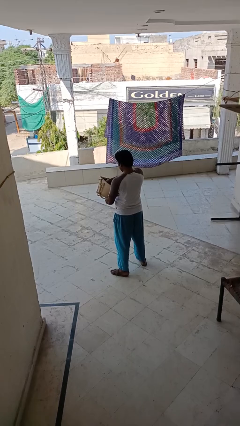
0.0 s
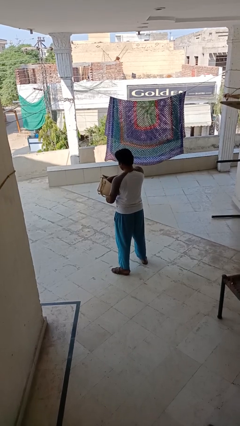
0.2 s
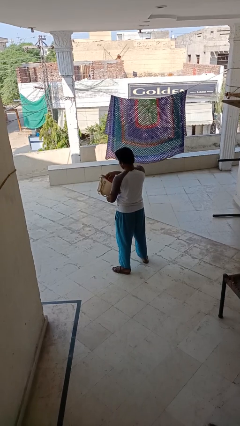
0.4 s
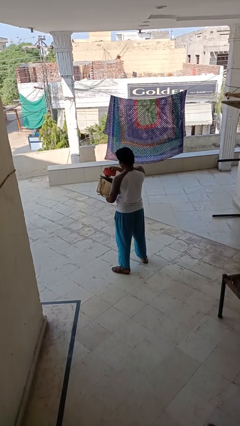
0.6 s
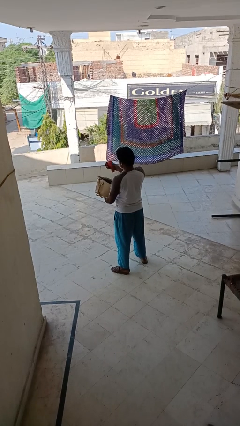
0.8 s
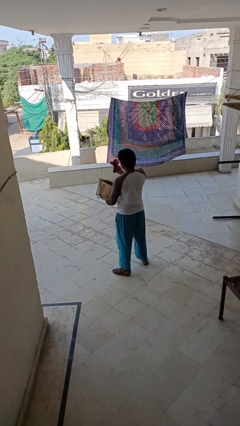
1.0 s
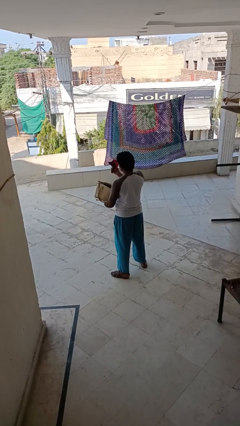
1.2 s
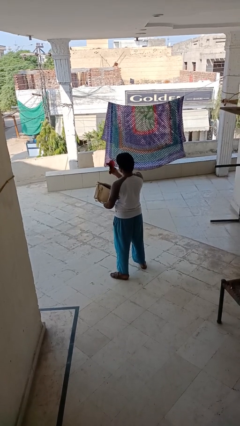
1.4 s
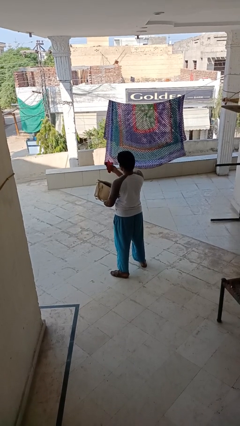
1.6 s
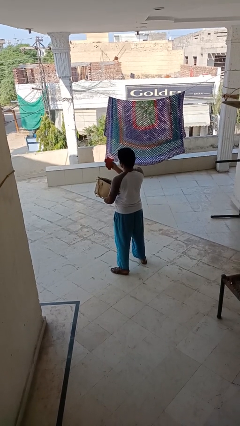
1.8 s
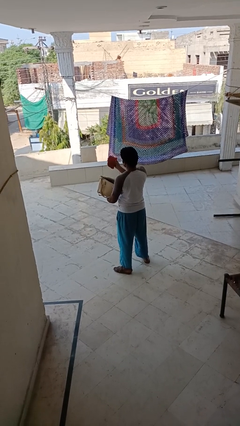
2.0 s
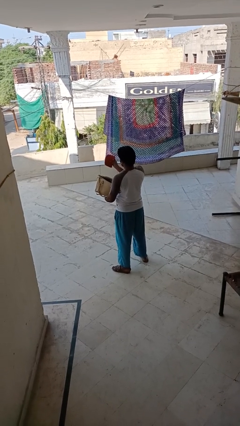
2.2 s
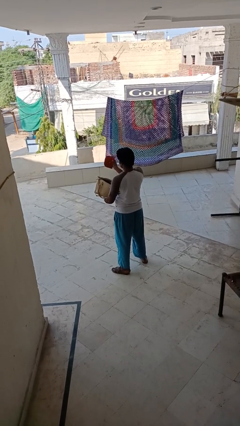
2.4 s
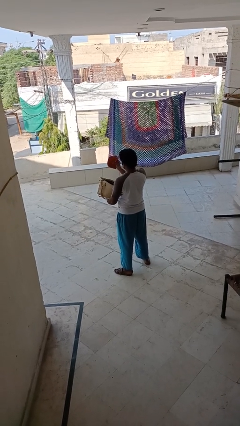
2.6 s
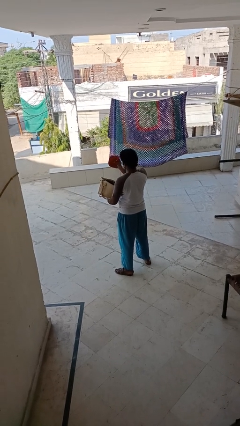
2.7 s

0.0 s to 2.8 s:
person takes object from purse

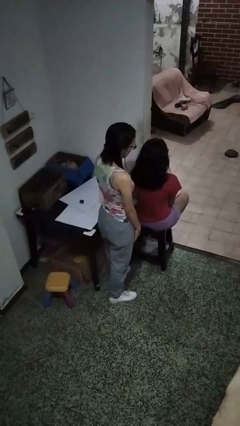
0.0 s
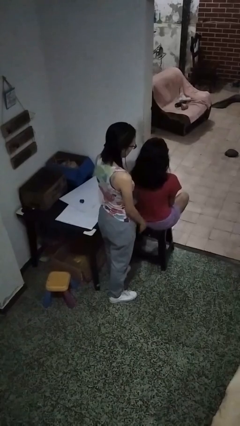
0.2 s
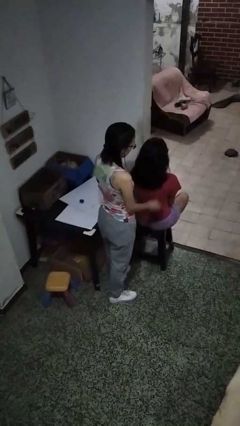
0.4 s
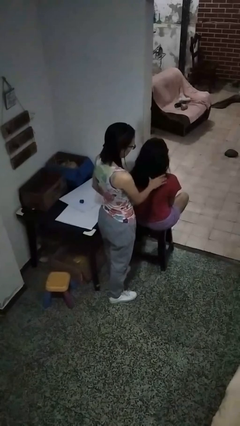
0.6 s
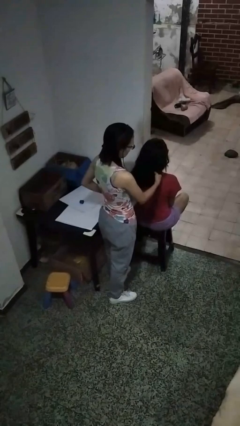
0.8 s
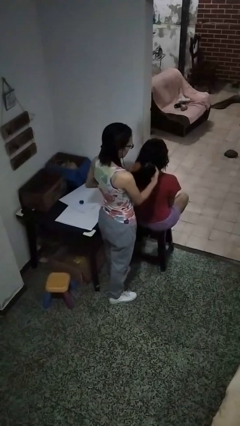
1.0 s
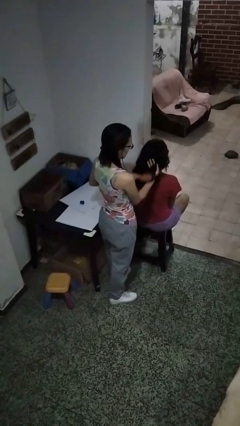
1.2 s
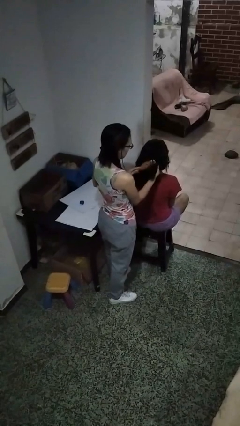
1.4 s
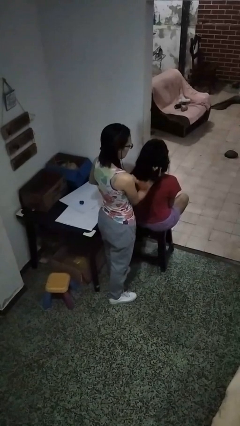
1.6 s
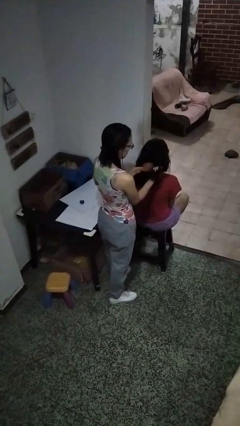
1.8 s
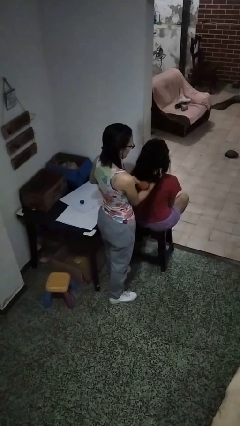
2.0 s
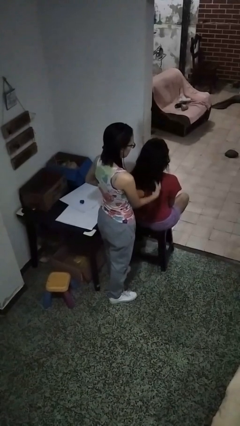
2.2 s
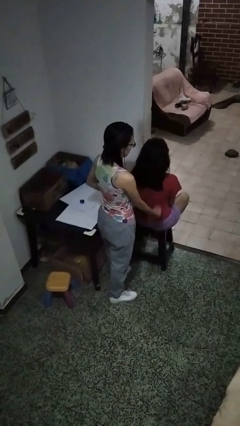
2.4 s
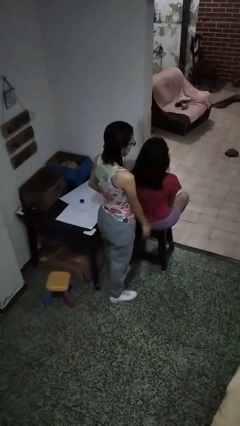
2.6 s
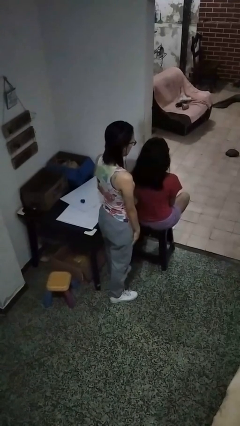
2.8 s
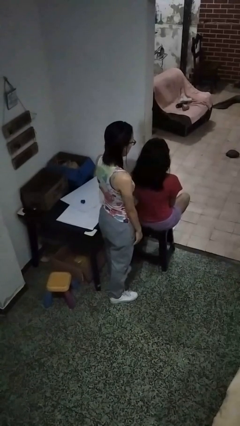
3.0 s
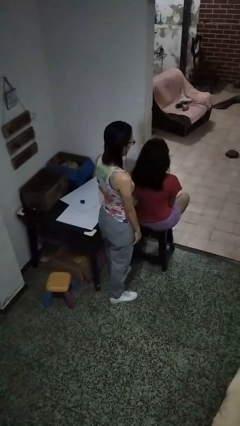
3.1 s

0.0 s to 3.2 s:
person brushes hair of person

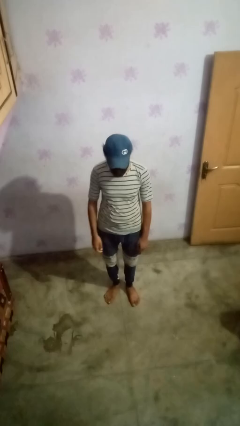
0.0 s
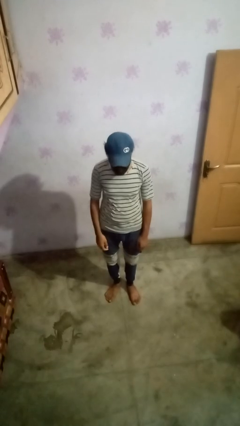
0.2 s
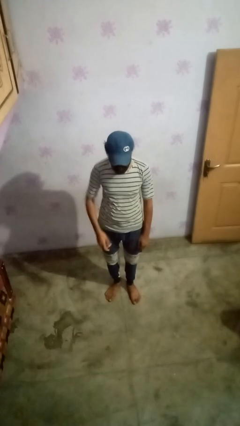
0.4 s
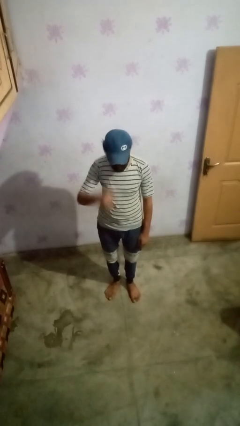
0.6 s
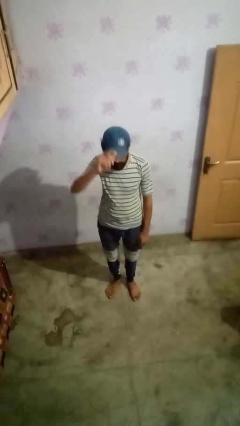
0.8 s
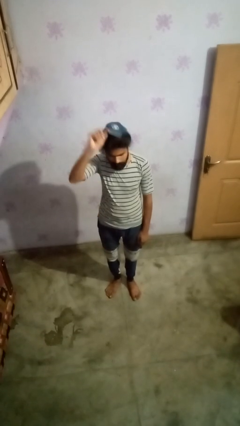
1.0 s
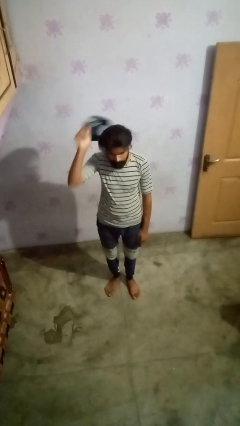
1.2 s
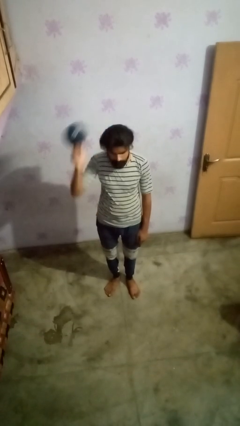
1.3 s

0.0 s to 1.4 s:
person takes off hat

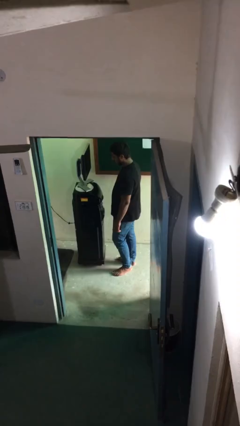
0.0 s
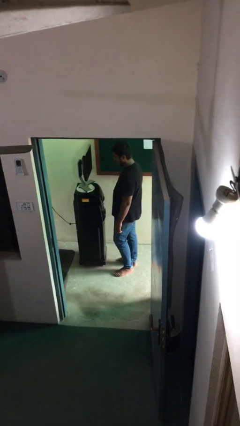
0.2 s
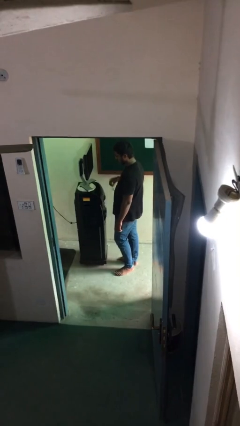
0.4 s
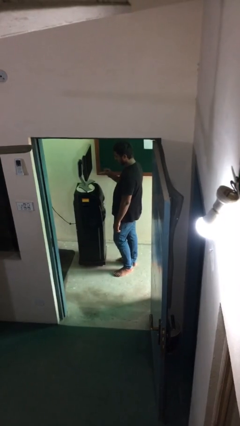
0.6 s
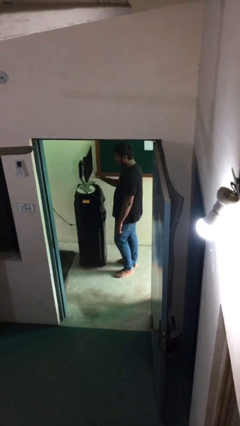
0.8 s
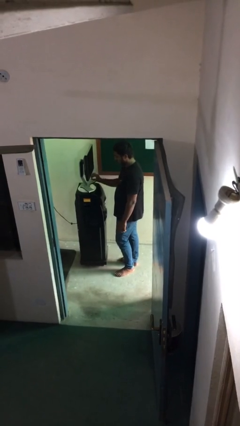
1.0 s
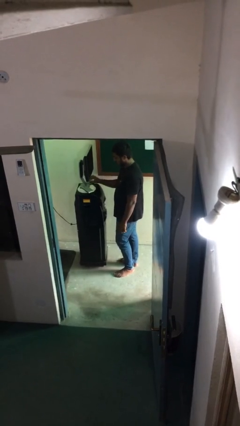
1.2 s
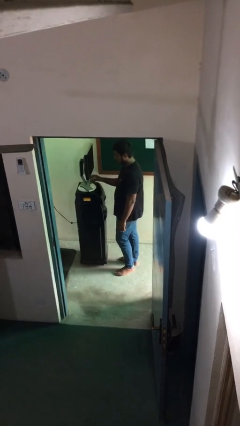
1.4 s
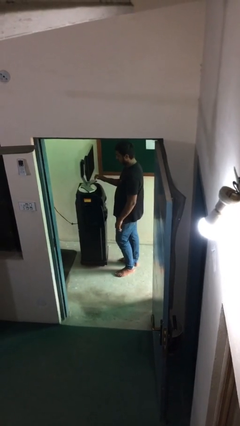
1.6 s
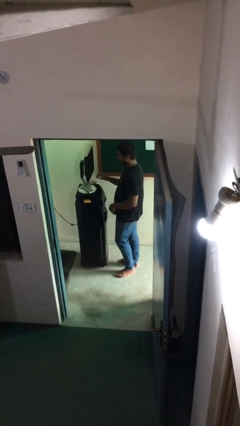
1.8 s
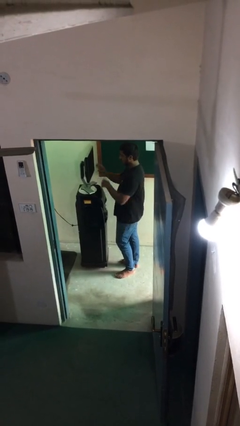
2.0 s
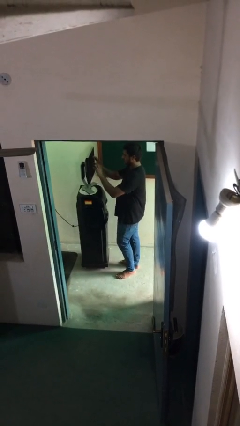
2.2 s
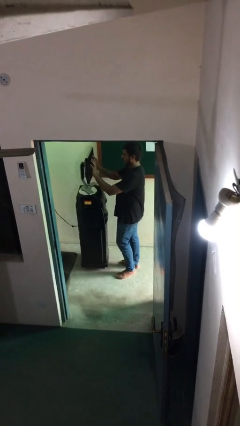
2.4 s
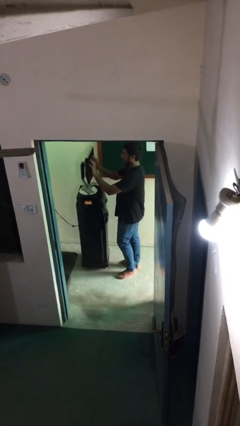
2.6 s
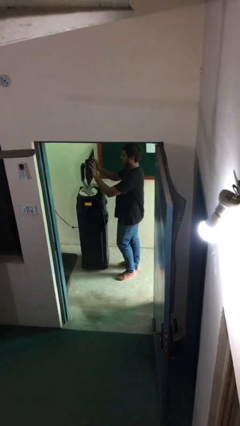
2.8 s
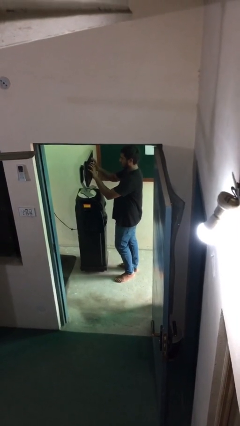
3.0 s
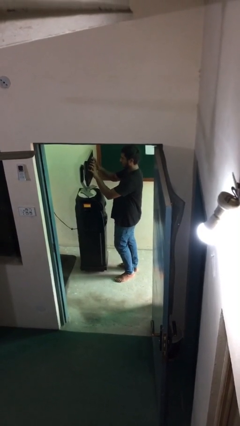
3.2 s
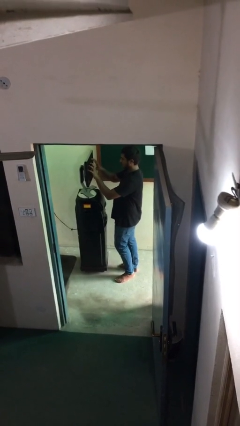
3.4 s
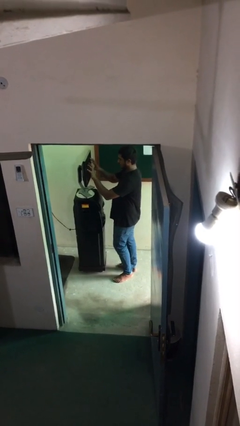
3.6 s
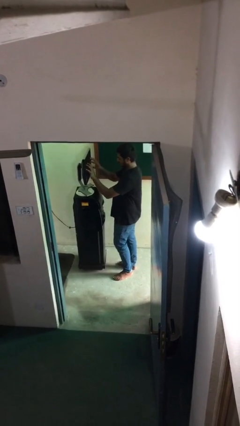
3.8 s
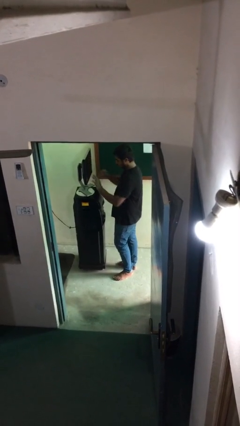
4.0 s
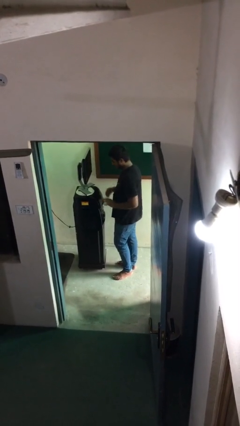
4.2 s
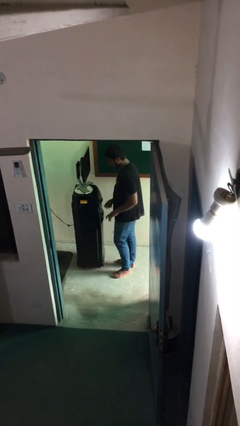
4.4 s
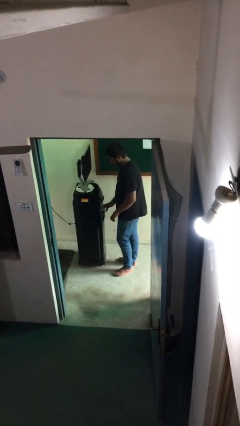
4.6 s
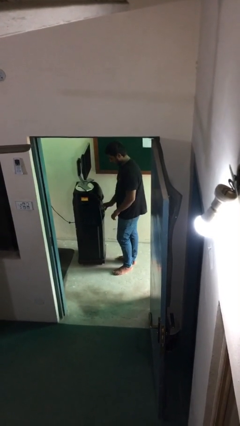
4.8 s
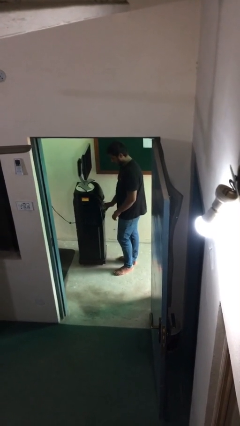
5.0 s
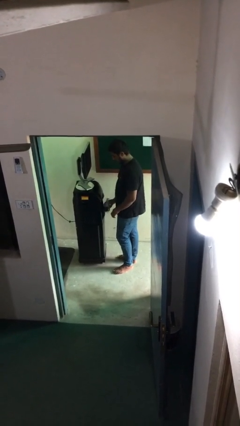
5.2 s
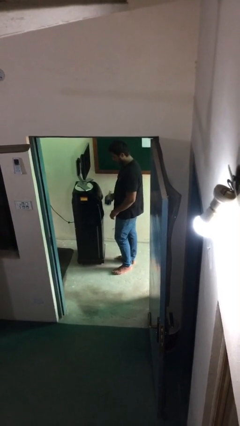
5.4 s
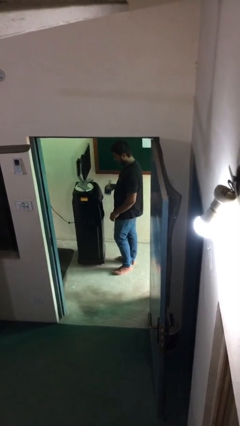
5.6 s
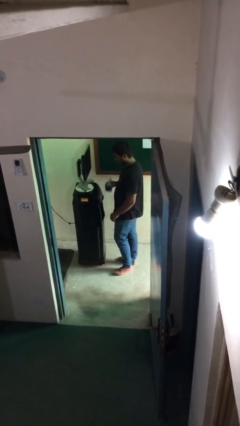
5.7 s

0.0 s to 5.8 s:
person purchases from machine

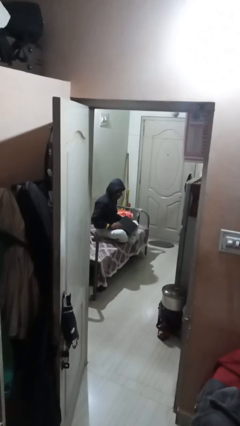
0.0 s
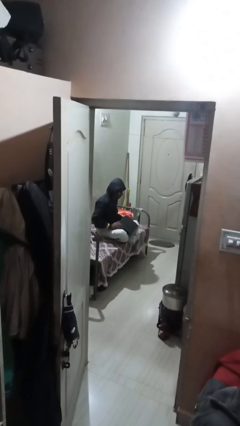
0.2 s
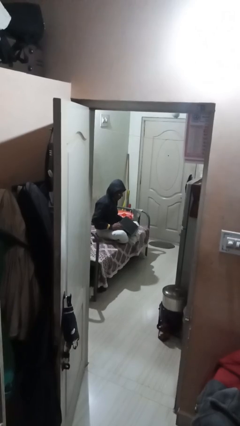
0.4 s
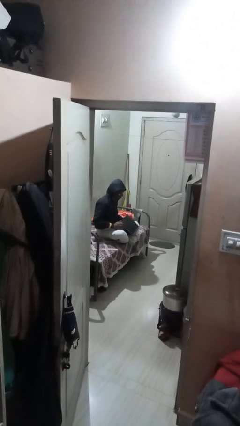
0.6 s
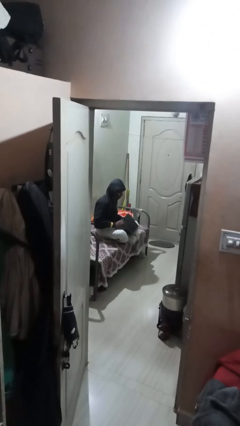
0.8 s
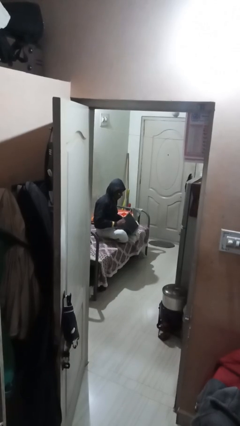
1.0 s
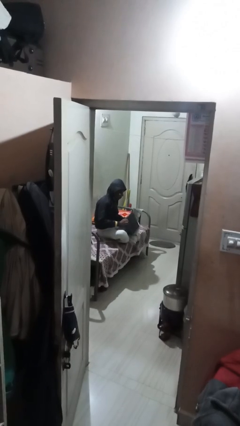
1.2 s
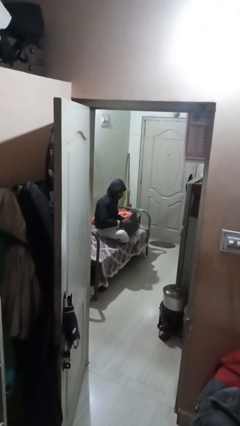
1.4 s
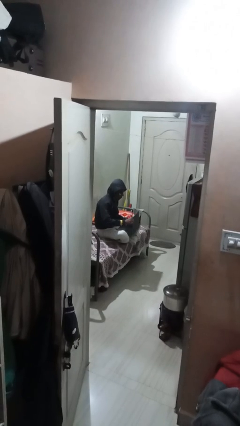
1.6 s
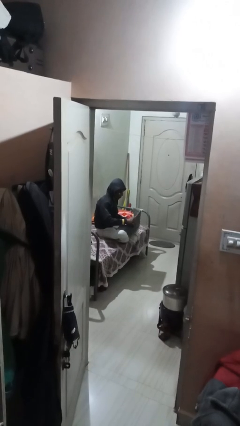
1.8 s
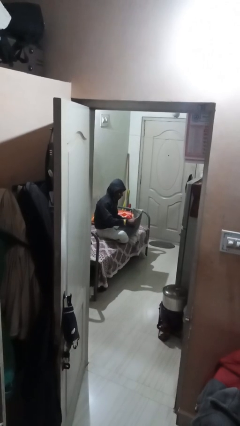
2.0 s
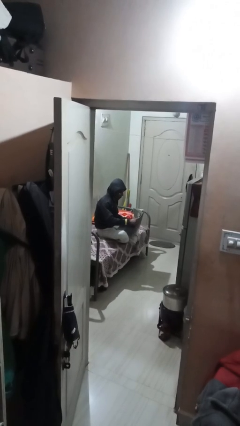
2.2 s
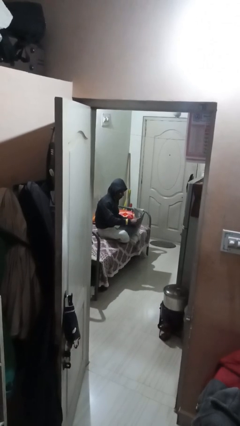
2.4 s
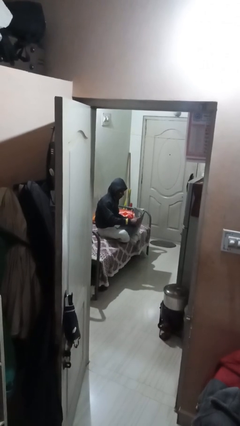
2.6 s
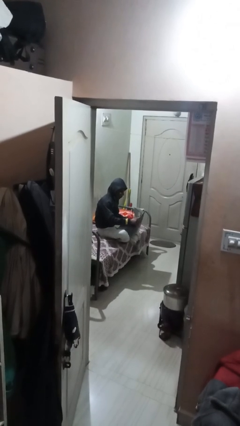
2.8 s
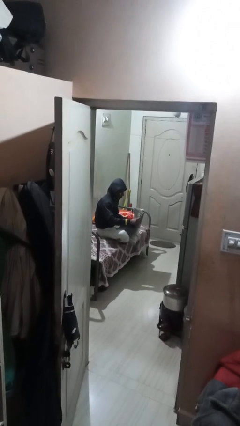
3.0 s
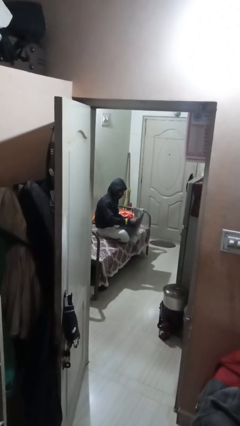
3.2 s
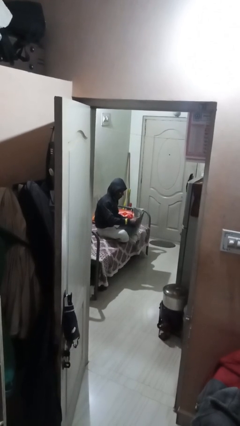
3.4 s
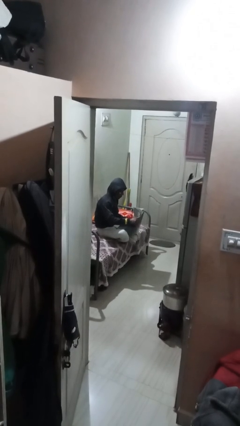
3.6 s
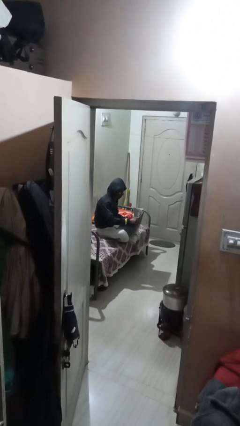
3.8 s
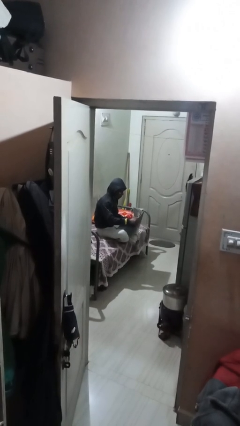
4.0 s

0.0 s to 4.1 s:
person interacts with laptop

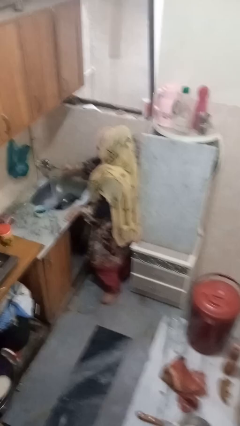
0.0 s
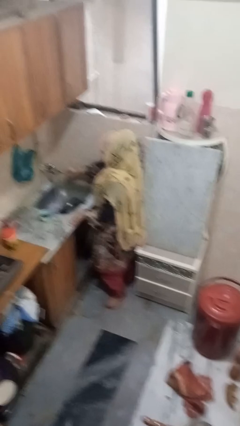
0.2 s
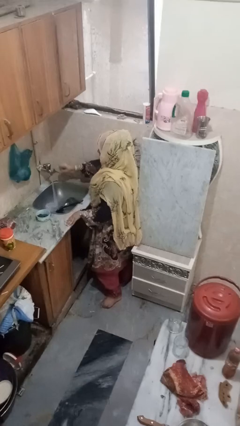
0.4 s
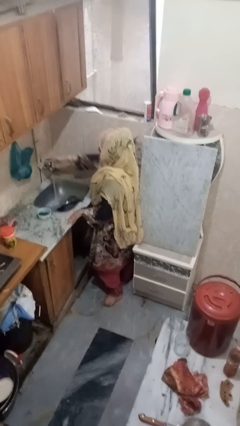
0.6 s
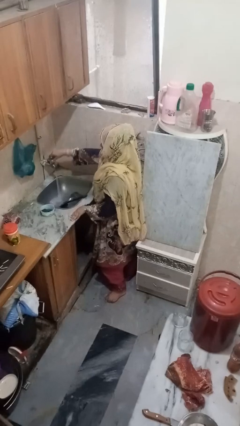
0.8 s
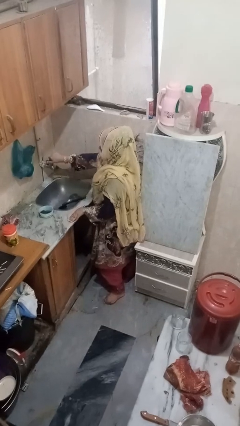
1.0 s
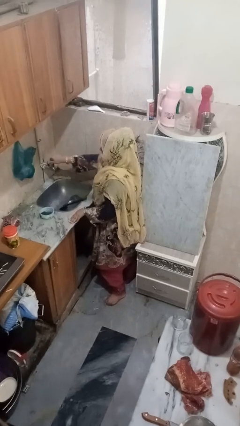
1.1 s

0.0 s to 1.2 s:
person turns off faucet
